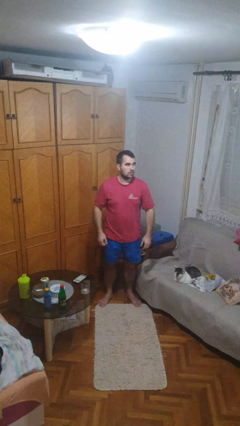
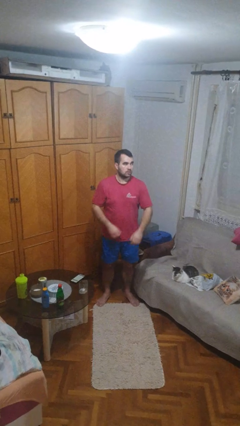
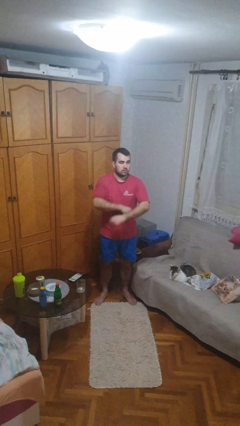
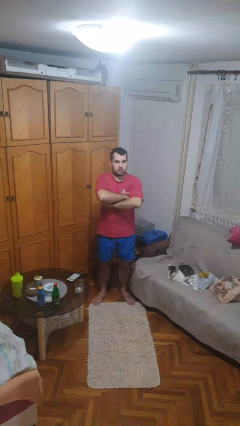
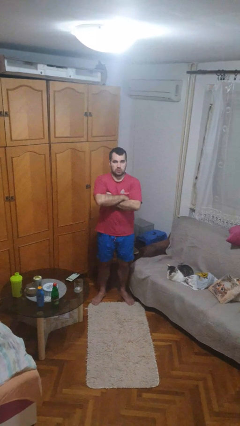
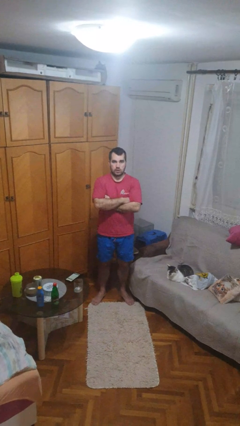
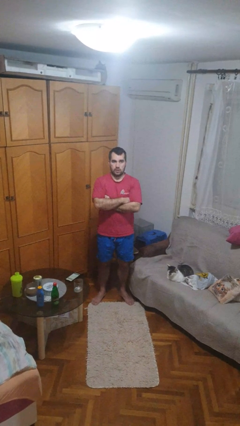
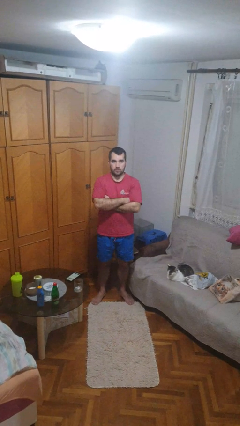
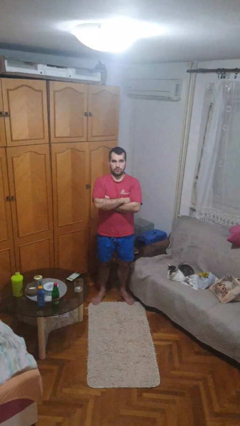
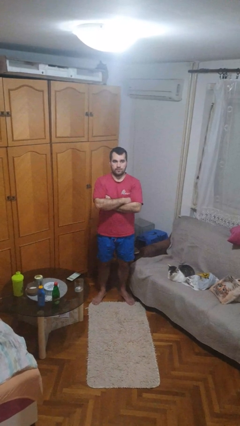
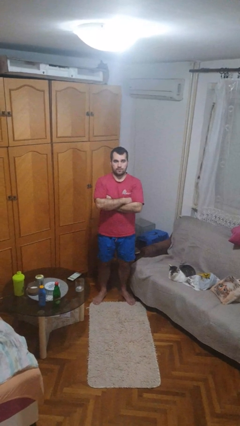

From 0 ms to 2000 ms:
person crosses arms

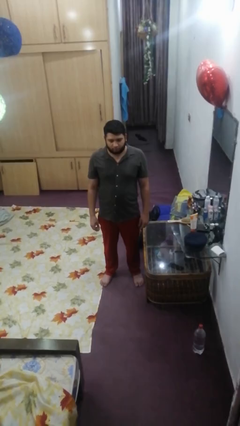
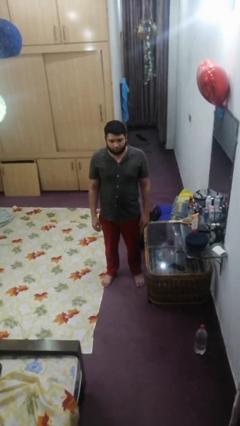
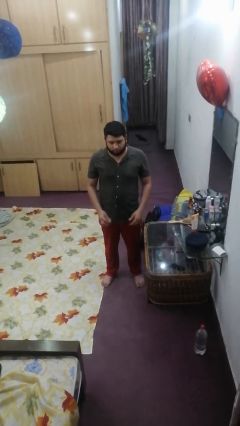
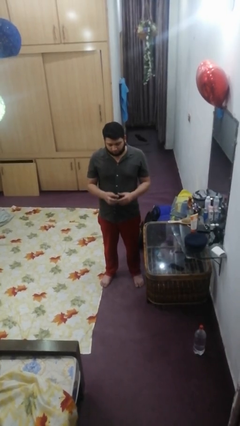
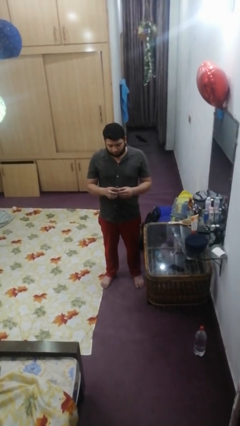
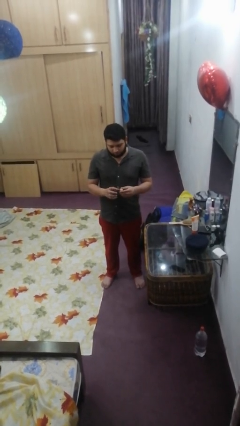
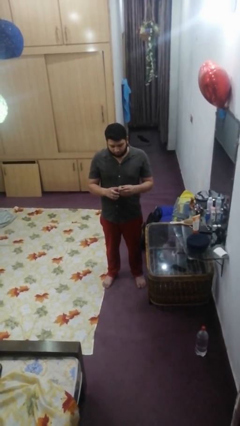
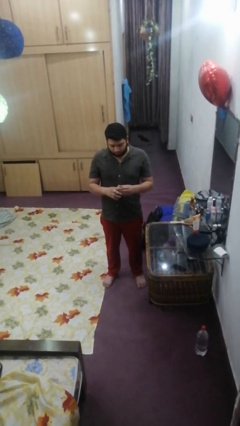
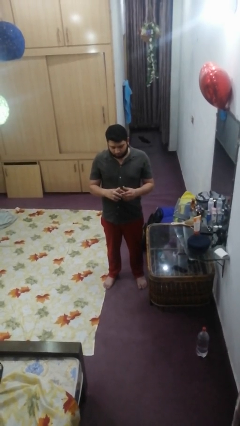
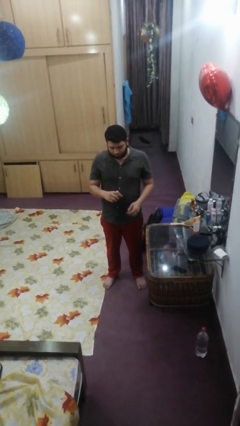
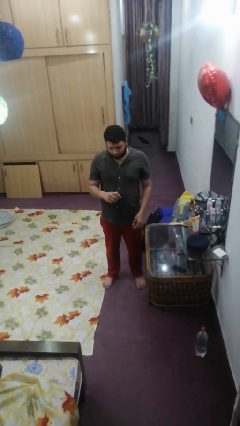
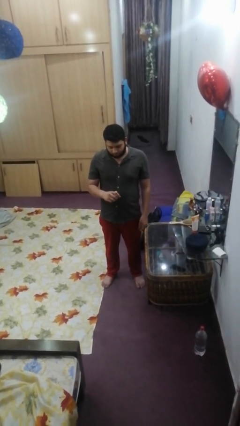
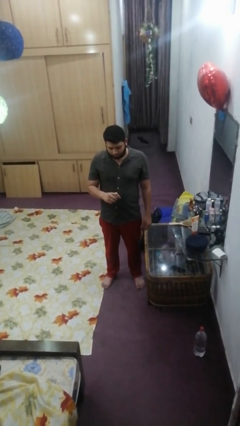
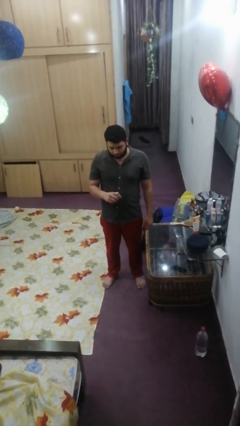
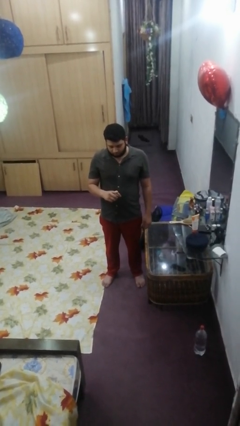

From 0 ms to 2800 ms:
person puts on ring

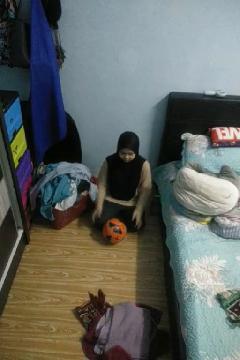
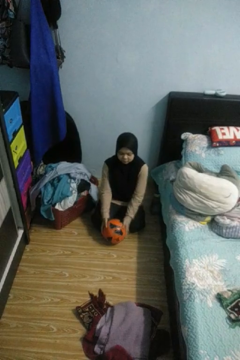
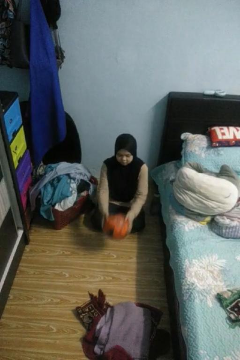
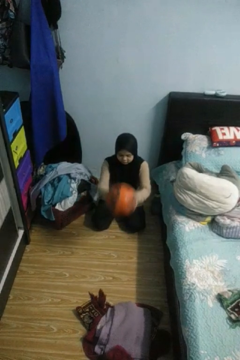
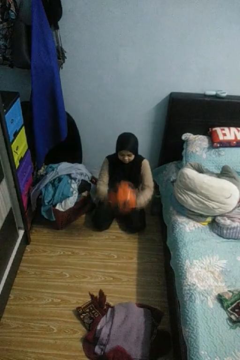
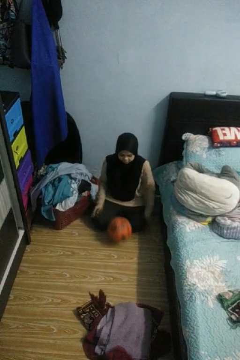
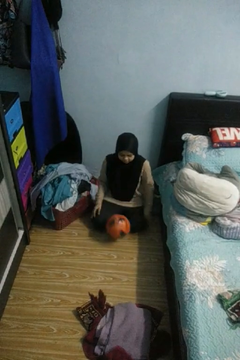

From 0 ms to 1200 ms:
person bounces ball on floor

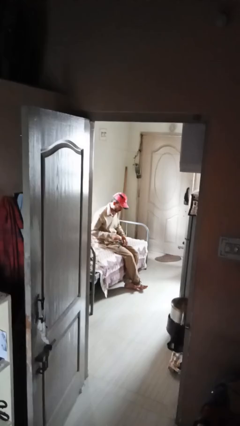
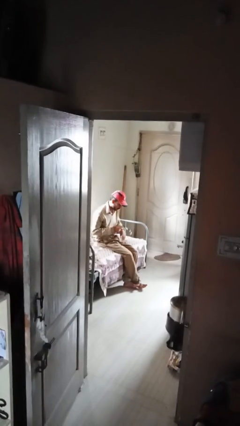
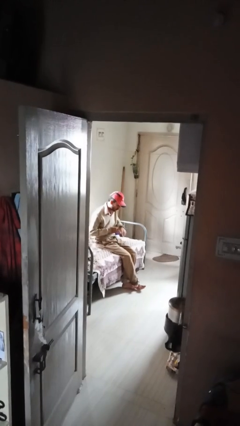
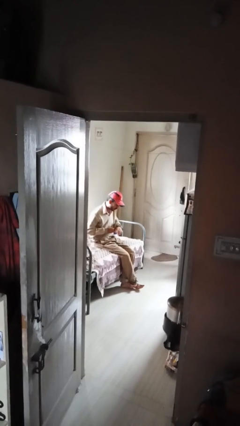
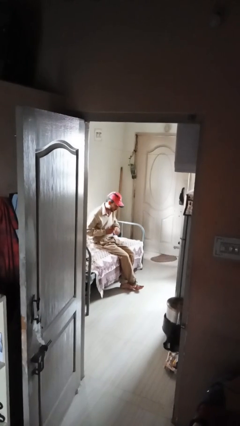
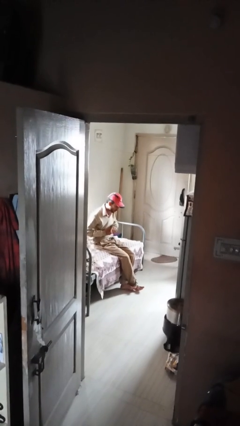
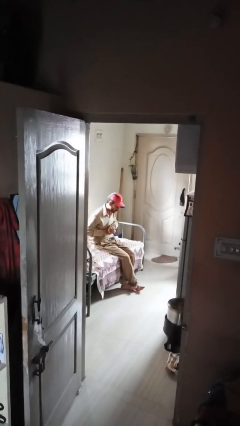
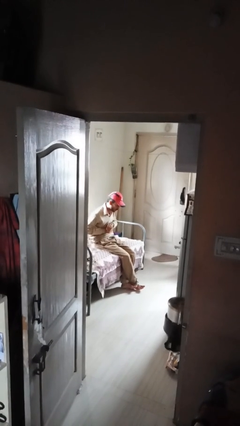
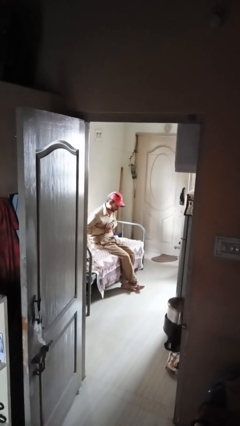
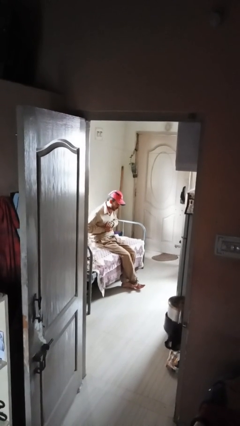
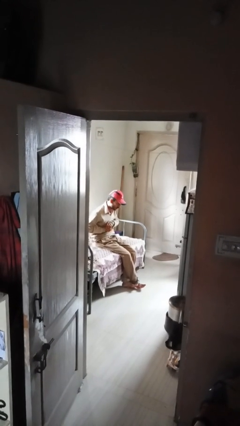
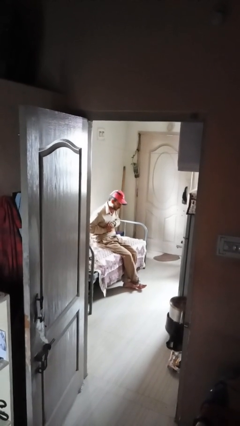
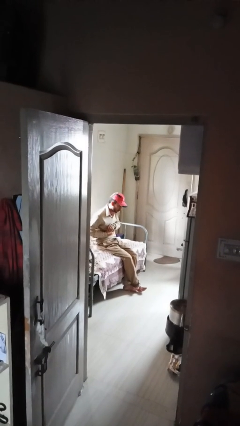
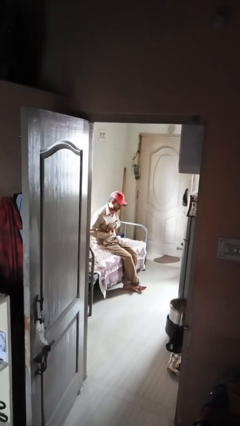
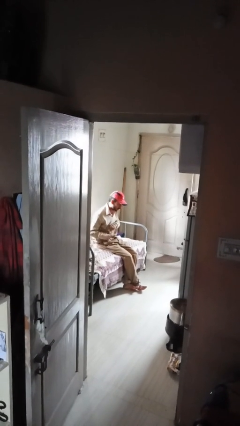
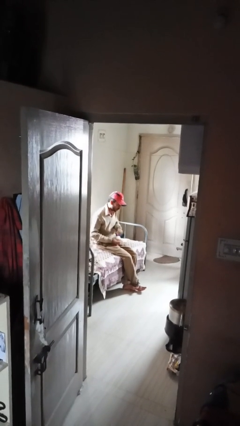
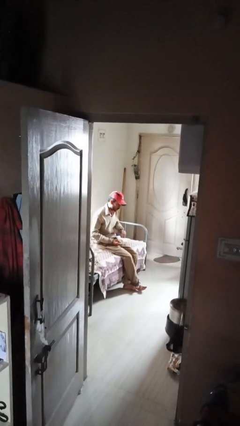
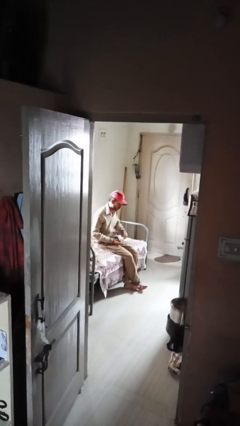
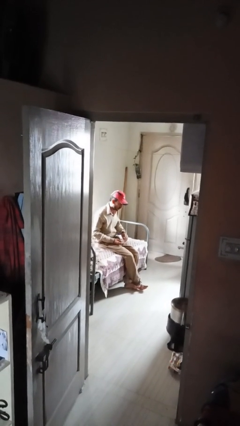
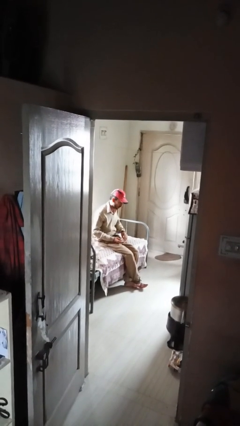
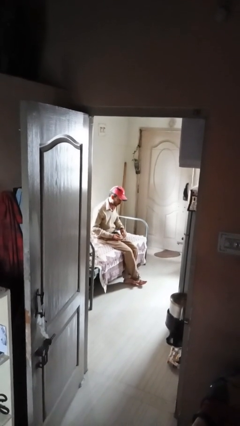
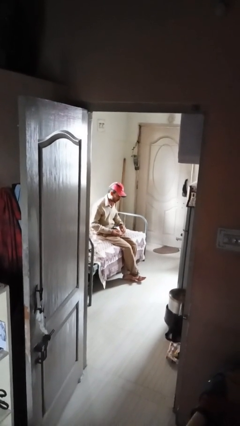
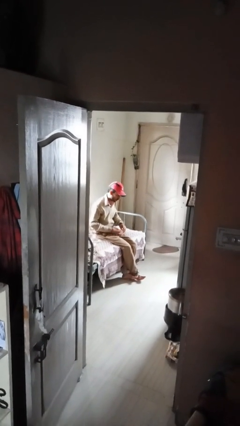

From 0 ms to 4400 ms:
person puts on wristwatch

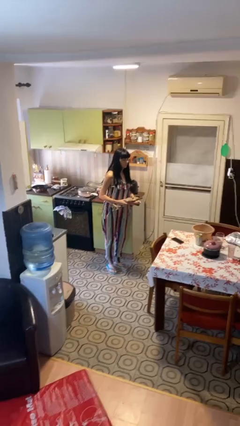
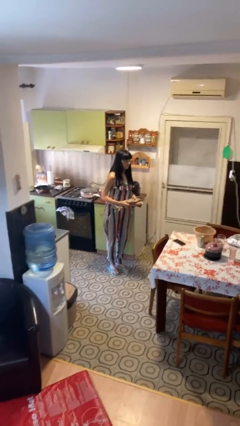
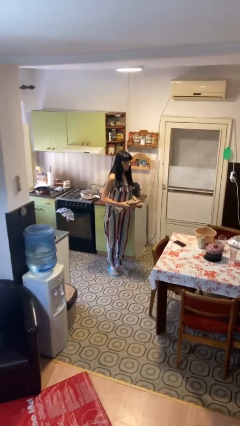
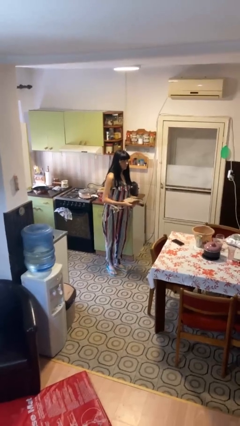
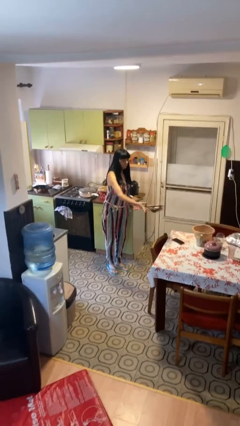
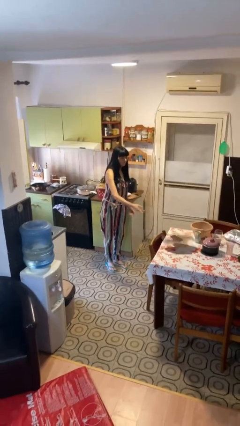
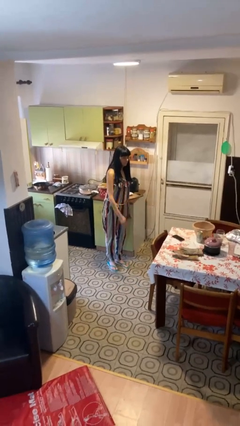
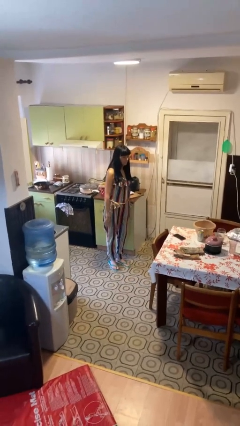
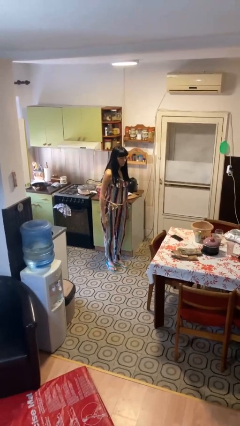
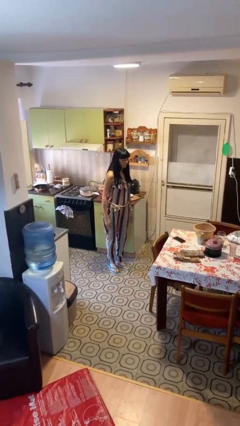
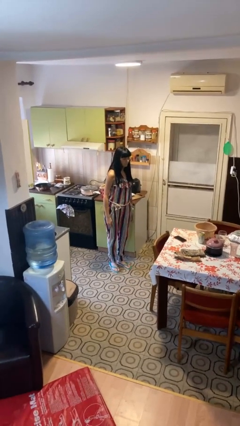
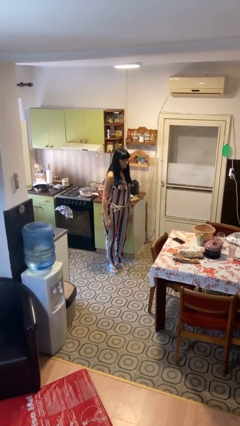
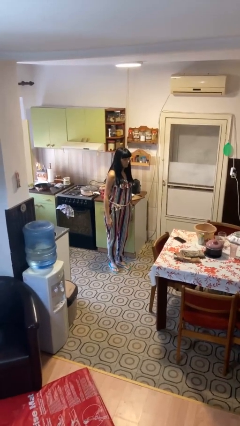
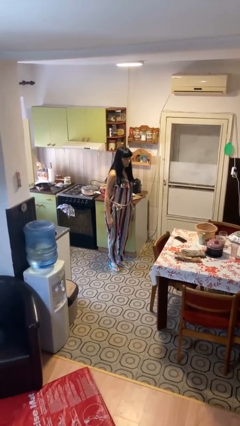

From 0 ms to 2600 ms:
person throws object on table

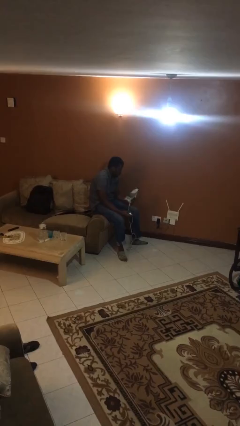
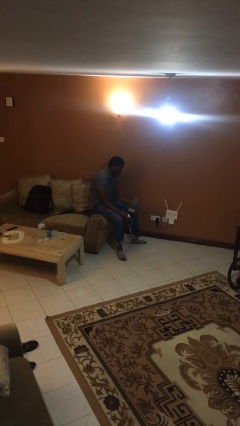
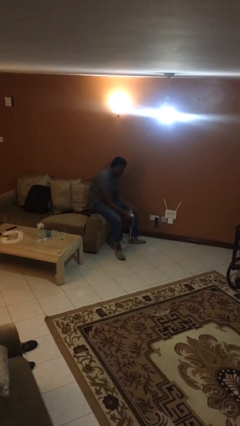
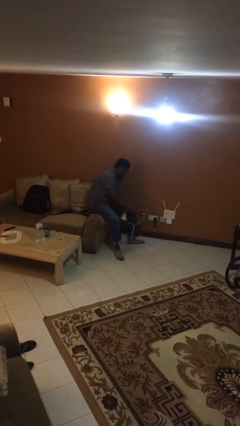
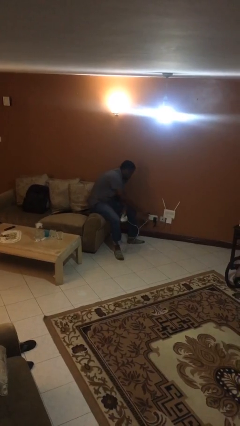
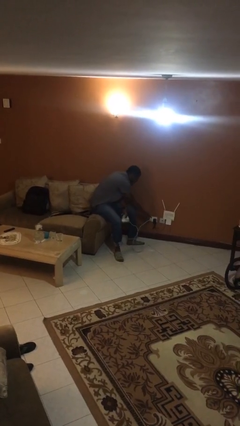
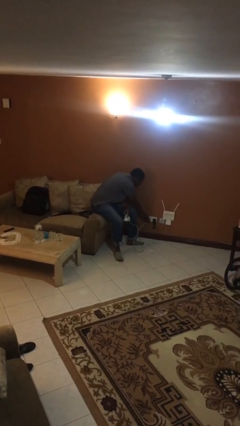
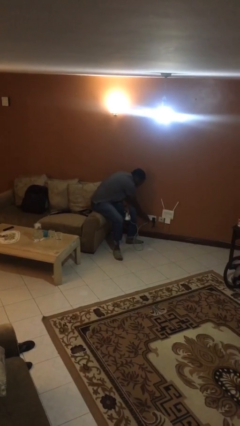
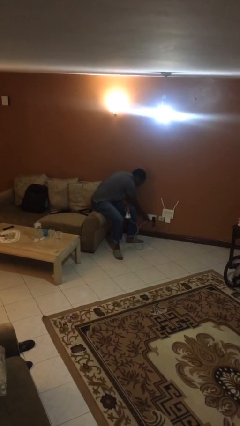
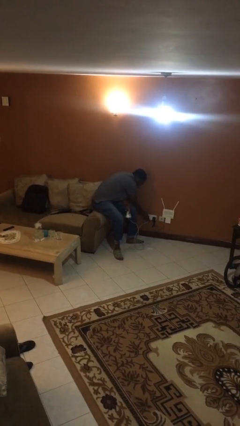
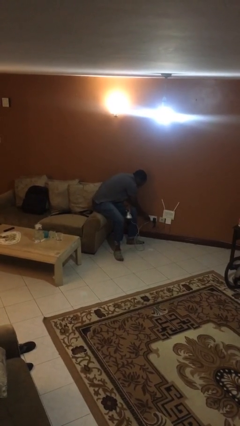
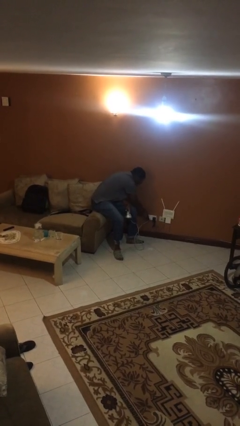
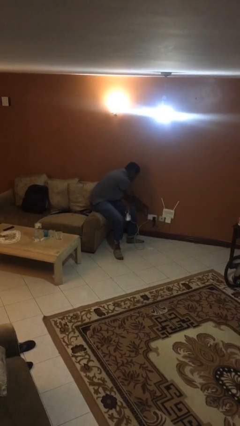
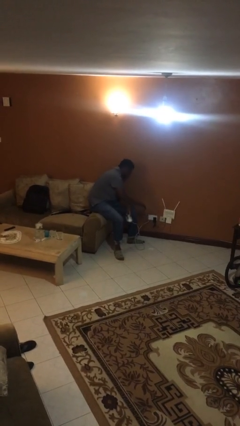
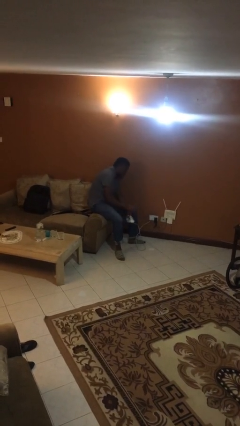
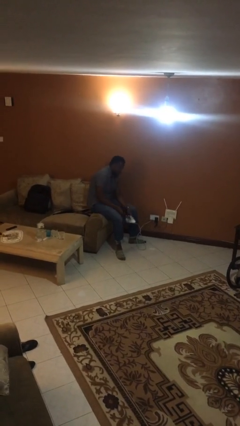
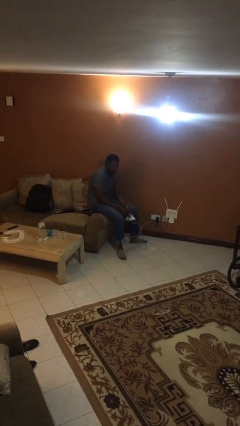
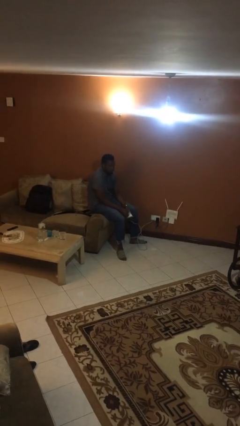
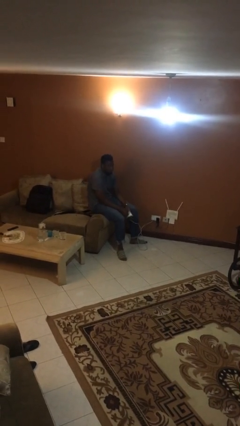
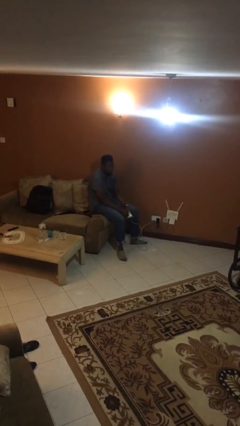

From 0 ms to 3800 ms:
person plugs into electrical socket

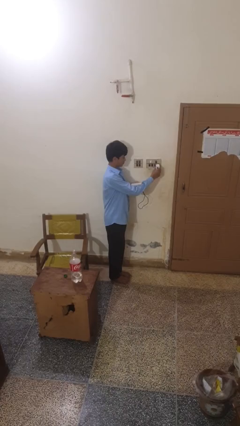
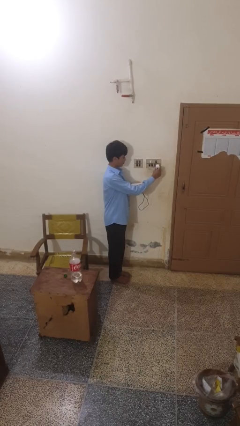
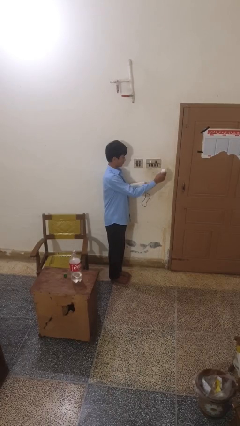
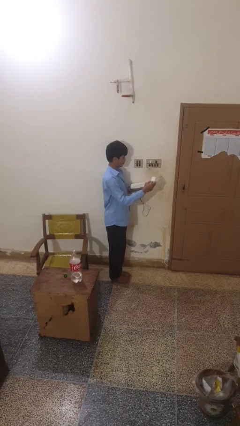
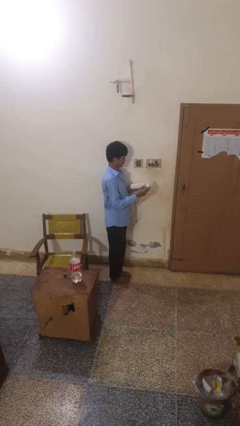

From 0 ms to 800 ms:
person unplugs from electrical socket
